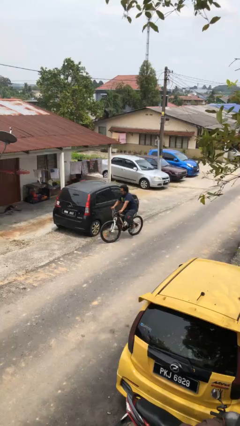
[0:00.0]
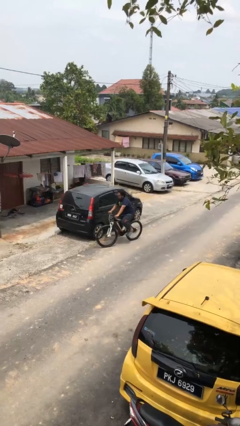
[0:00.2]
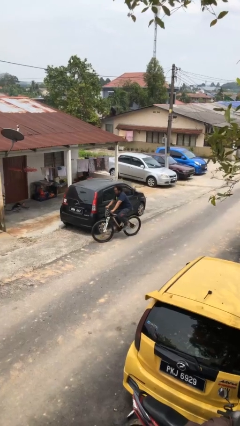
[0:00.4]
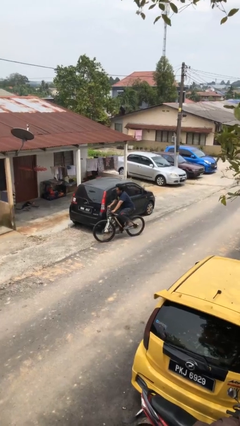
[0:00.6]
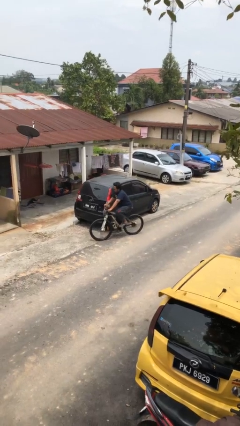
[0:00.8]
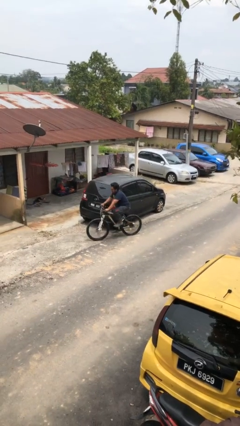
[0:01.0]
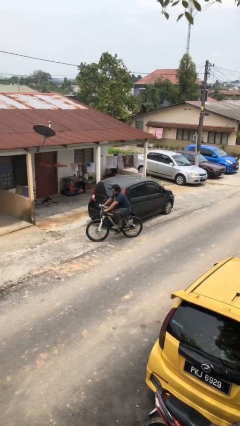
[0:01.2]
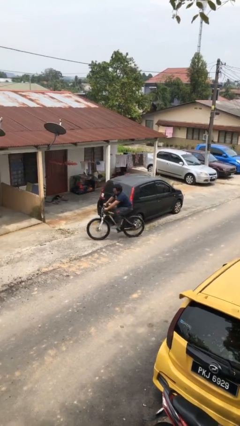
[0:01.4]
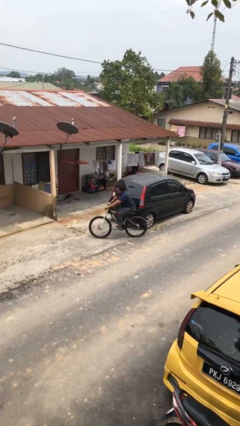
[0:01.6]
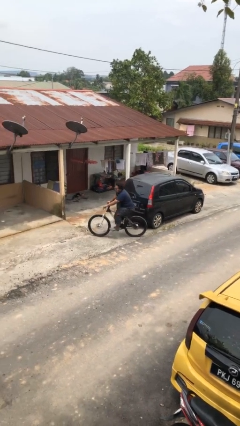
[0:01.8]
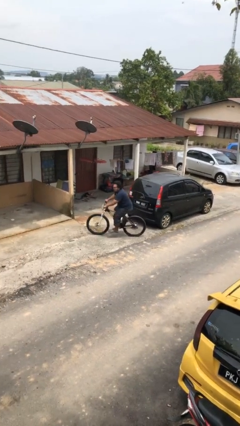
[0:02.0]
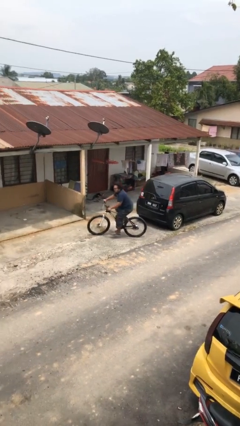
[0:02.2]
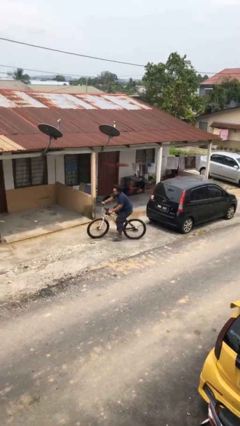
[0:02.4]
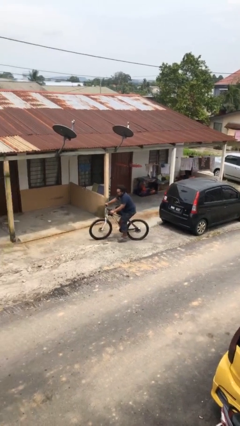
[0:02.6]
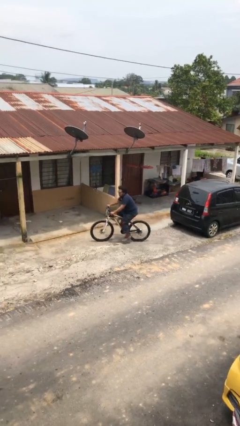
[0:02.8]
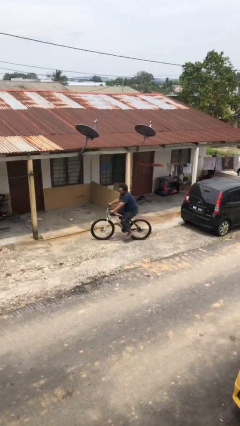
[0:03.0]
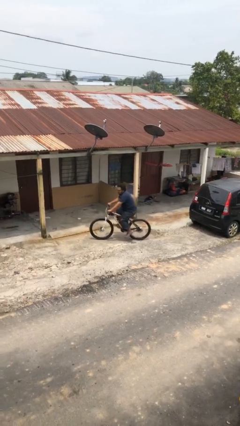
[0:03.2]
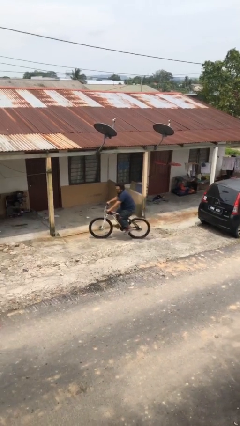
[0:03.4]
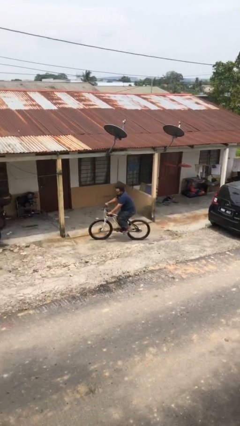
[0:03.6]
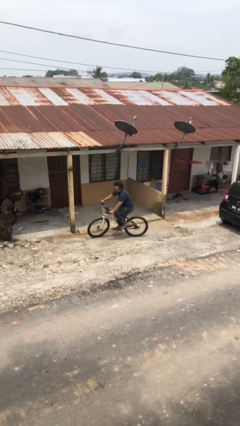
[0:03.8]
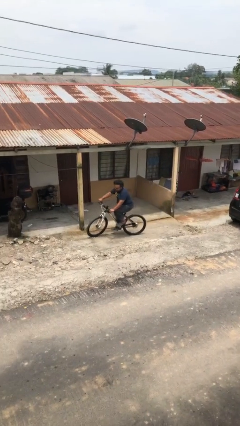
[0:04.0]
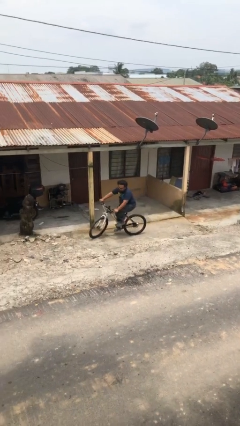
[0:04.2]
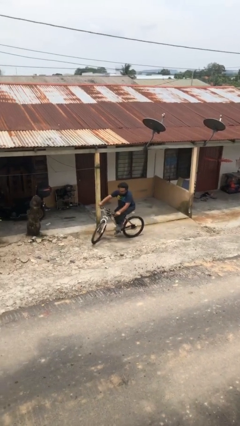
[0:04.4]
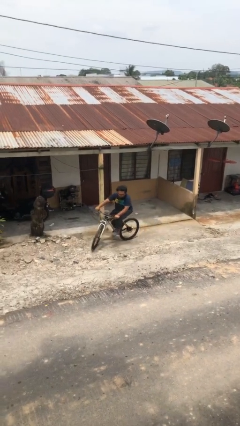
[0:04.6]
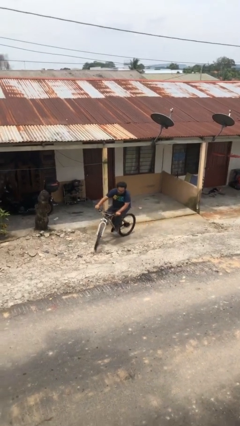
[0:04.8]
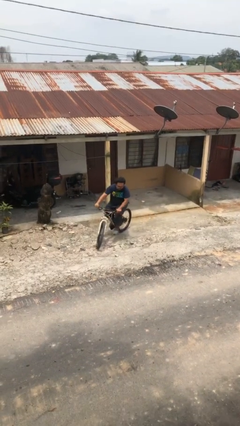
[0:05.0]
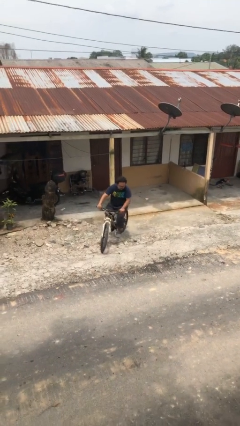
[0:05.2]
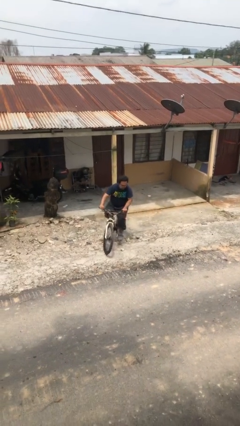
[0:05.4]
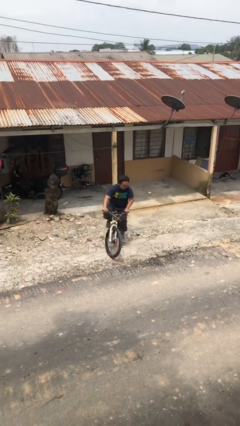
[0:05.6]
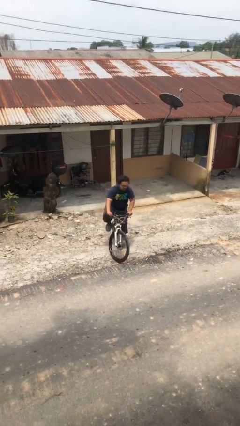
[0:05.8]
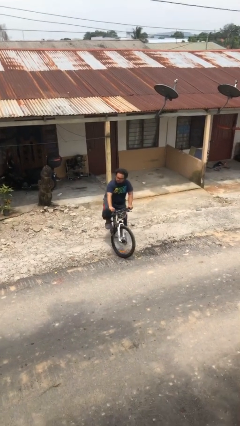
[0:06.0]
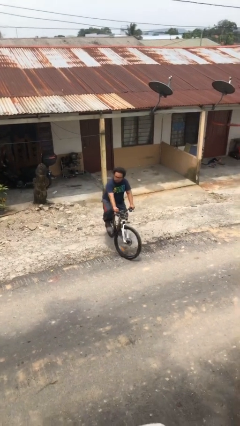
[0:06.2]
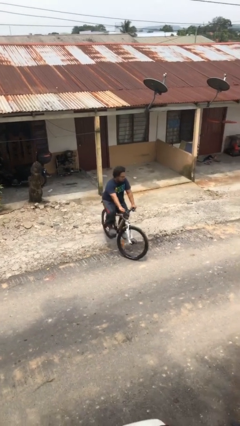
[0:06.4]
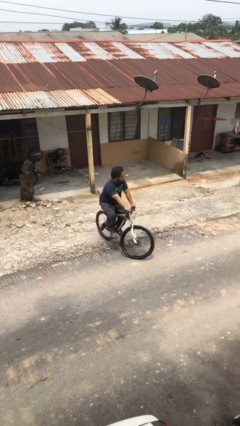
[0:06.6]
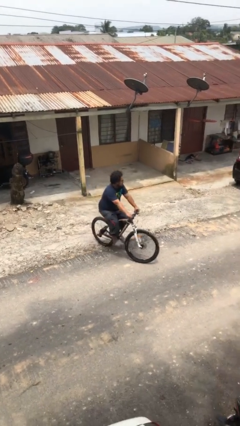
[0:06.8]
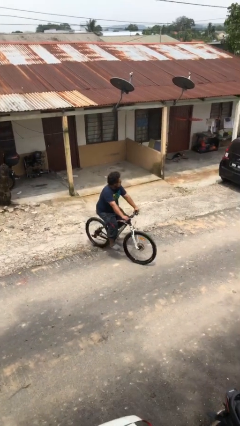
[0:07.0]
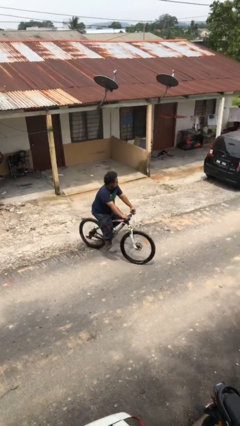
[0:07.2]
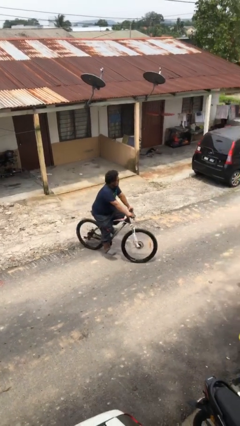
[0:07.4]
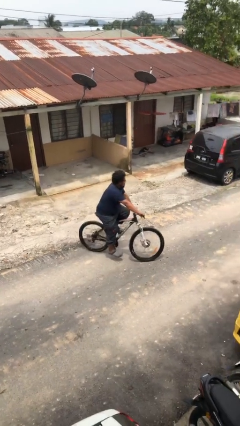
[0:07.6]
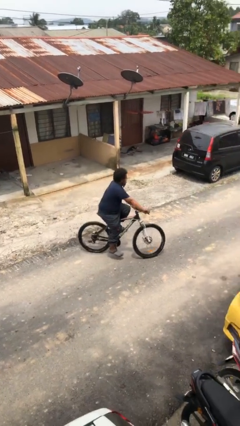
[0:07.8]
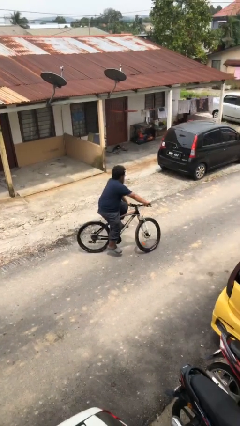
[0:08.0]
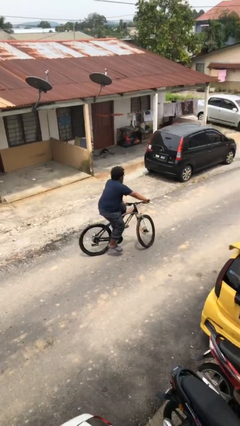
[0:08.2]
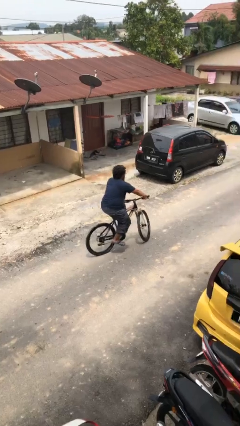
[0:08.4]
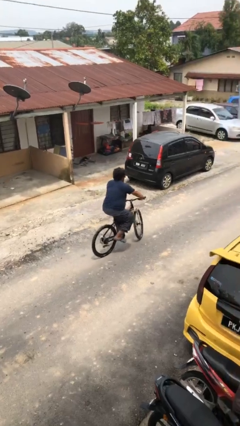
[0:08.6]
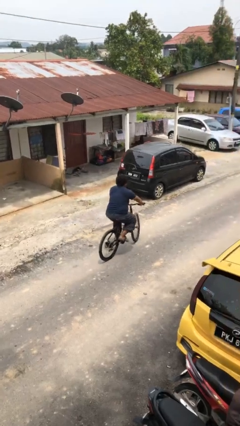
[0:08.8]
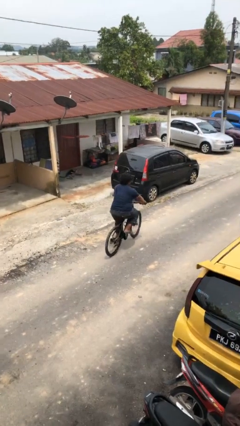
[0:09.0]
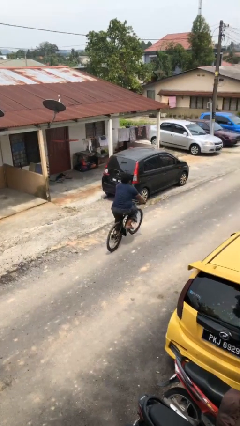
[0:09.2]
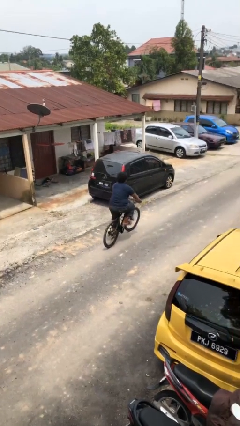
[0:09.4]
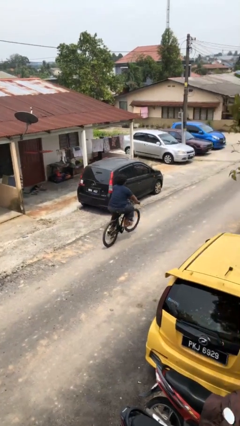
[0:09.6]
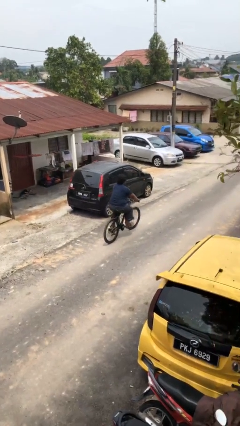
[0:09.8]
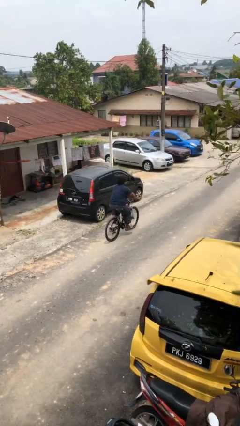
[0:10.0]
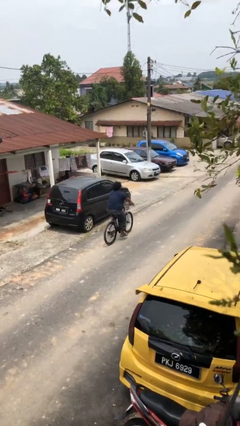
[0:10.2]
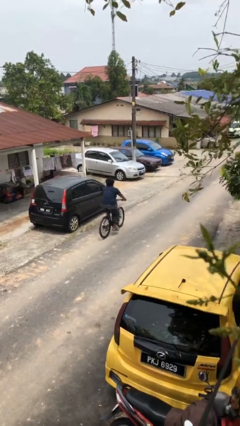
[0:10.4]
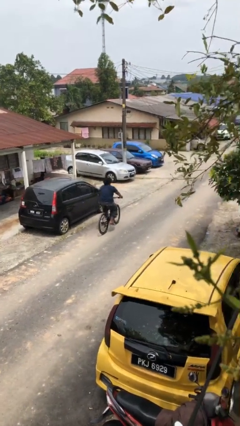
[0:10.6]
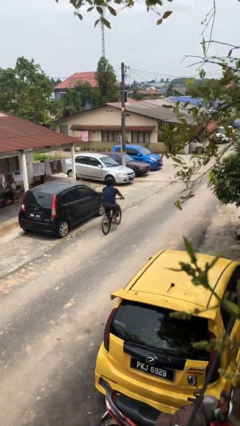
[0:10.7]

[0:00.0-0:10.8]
person rides bicycle

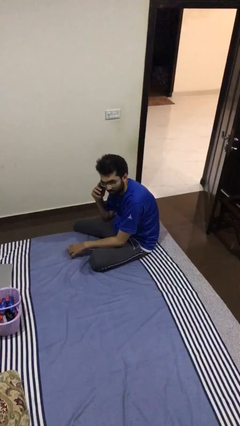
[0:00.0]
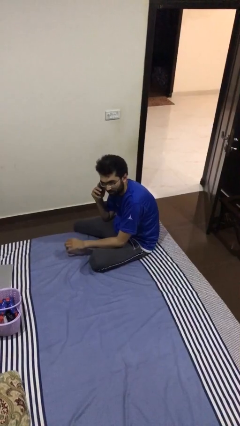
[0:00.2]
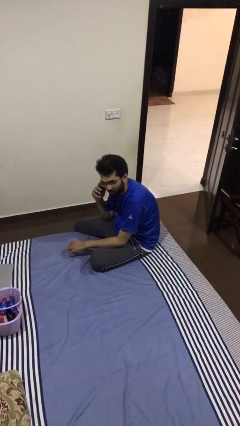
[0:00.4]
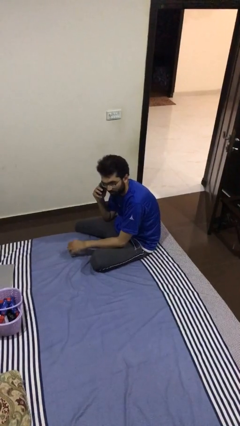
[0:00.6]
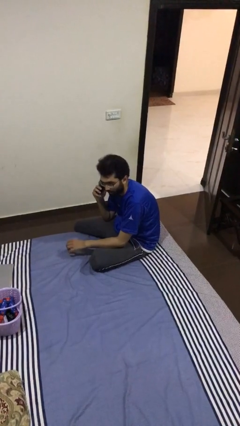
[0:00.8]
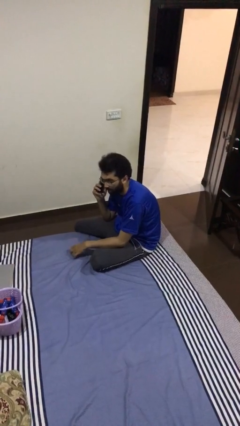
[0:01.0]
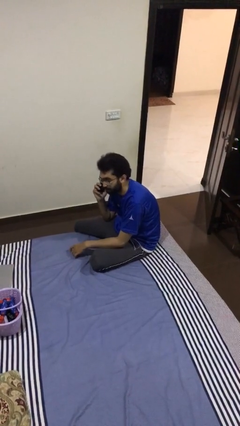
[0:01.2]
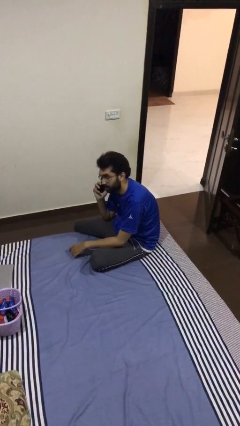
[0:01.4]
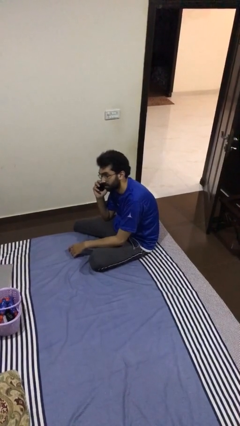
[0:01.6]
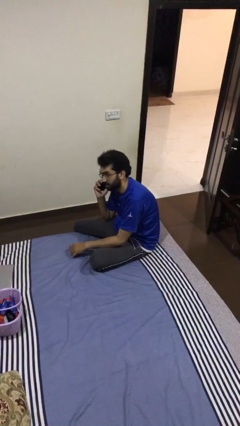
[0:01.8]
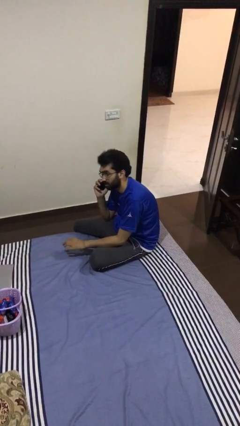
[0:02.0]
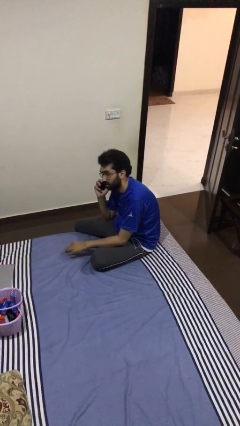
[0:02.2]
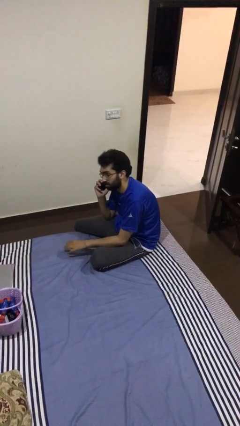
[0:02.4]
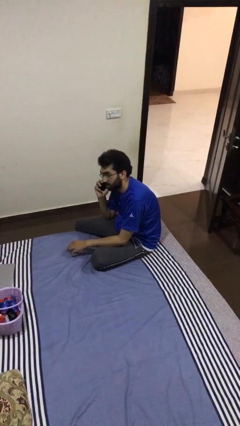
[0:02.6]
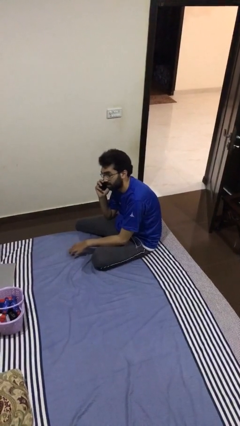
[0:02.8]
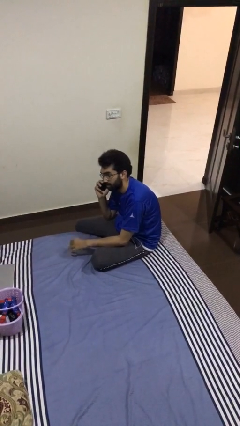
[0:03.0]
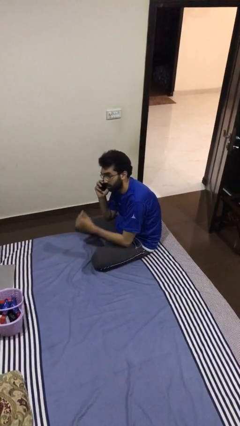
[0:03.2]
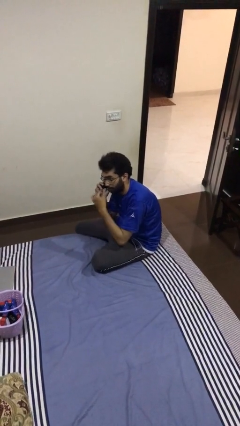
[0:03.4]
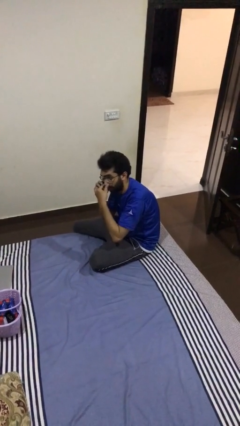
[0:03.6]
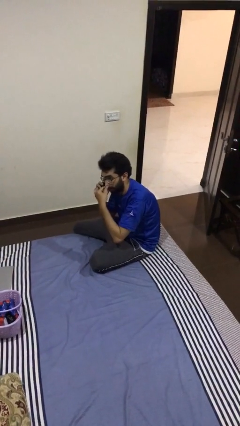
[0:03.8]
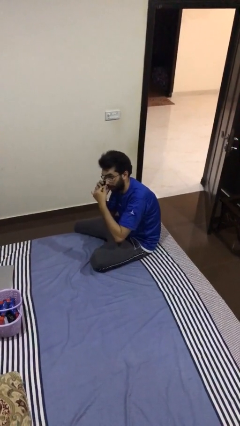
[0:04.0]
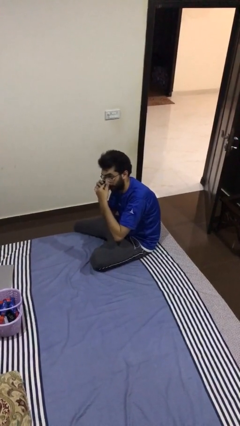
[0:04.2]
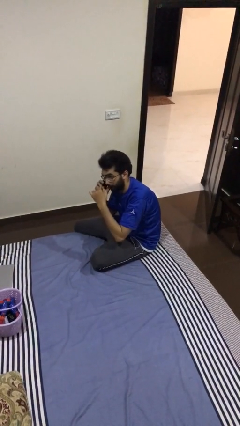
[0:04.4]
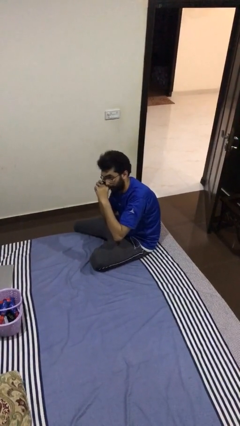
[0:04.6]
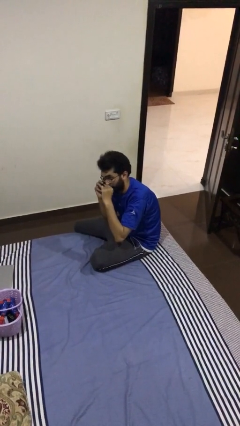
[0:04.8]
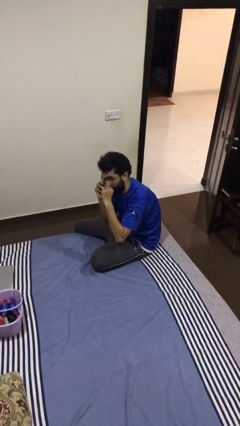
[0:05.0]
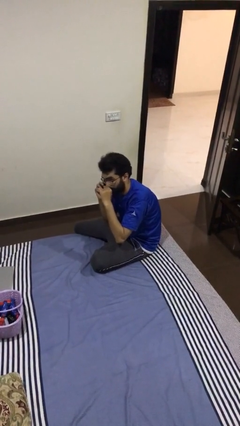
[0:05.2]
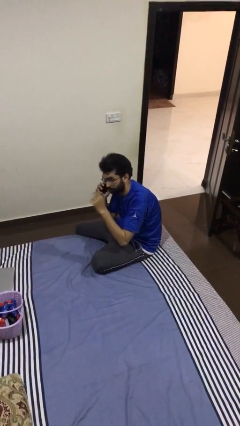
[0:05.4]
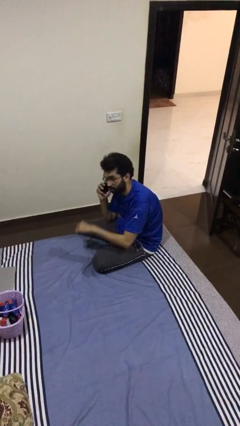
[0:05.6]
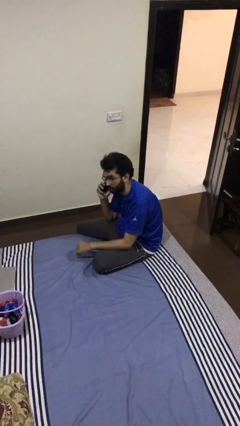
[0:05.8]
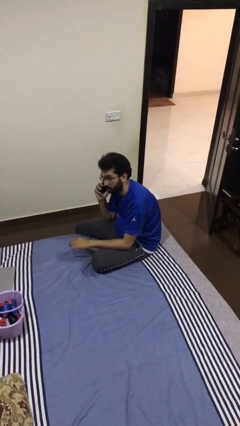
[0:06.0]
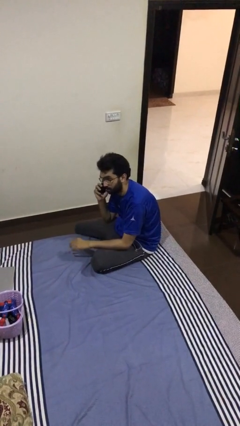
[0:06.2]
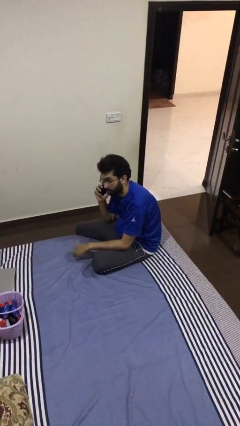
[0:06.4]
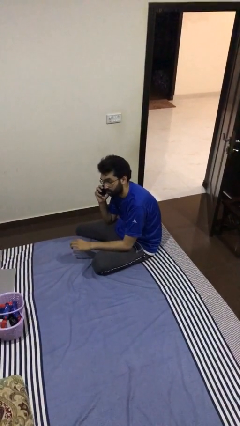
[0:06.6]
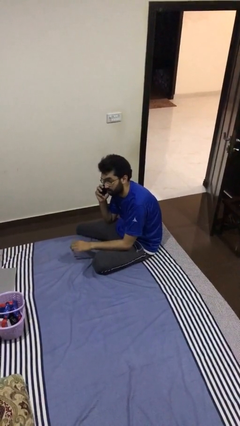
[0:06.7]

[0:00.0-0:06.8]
person talks on phone

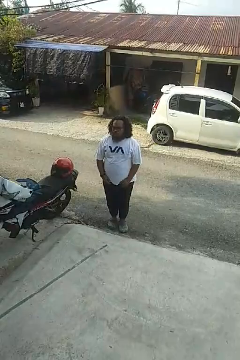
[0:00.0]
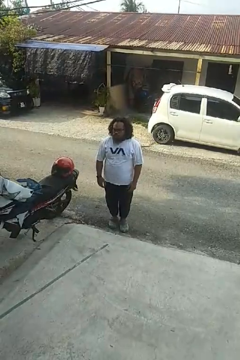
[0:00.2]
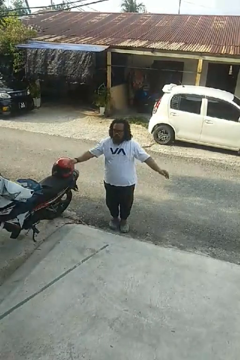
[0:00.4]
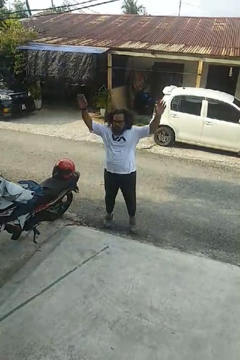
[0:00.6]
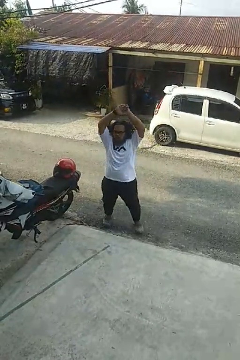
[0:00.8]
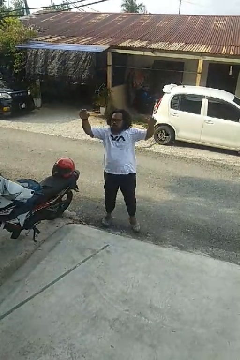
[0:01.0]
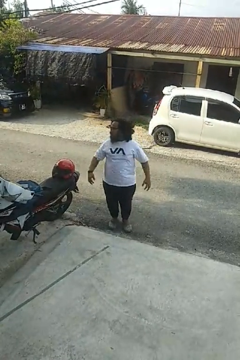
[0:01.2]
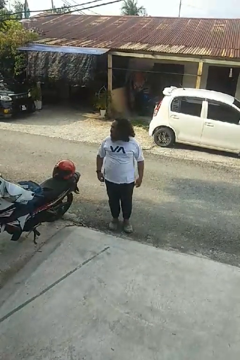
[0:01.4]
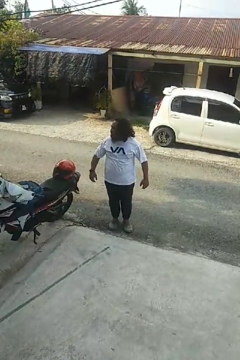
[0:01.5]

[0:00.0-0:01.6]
person exercises with jumping jacks
